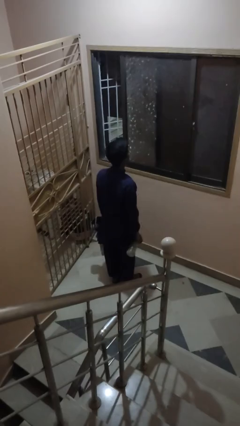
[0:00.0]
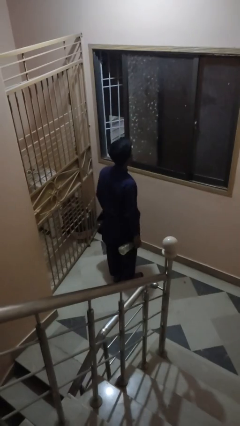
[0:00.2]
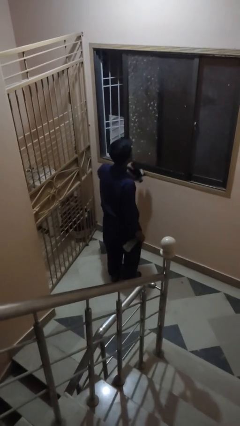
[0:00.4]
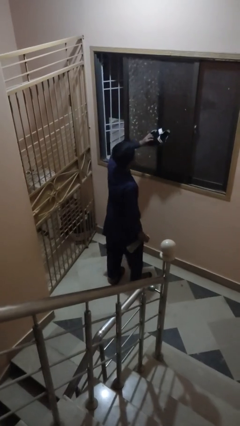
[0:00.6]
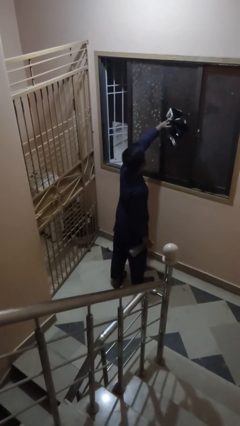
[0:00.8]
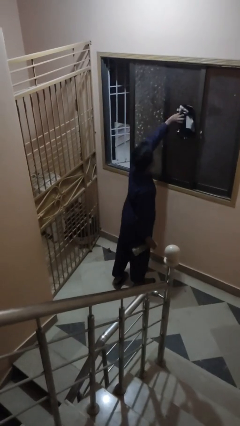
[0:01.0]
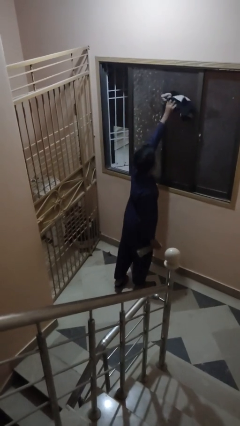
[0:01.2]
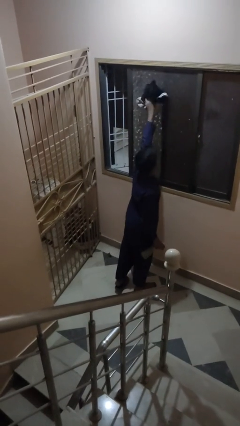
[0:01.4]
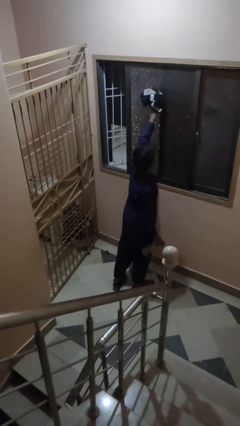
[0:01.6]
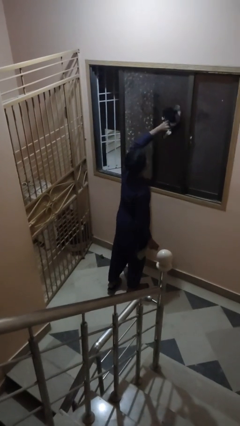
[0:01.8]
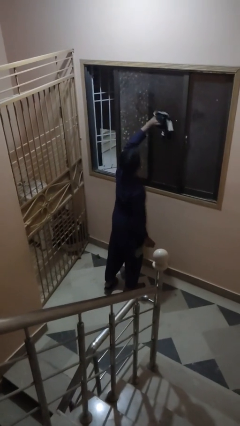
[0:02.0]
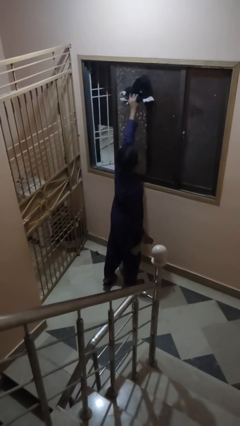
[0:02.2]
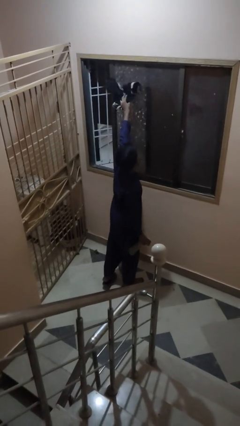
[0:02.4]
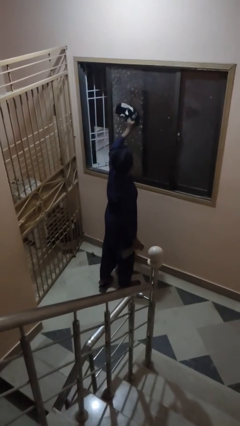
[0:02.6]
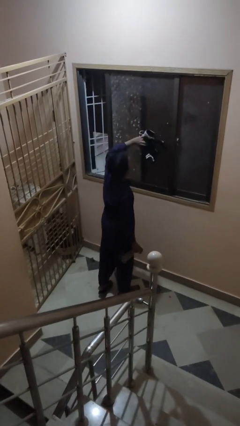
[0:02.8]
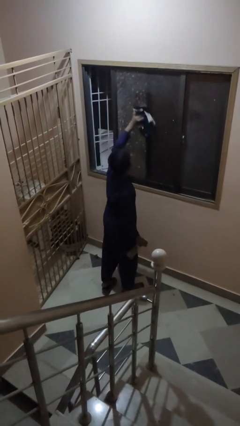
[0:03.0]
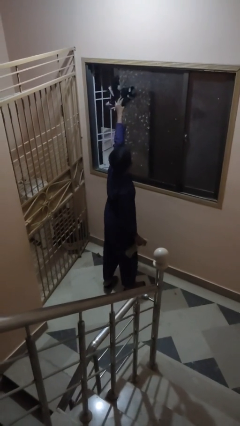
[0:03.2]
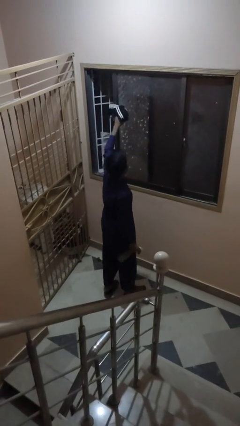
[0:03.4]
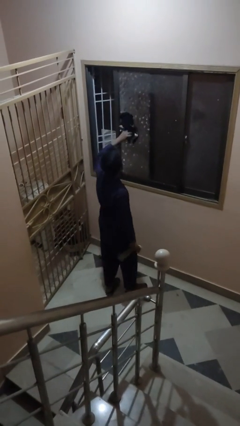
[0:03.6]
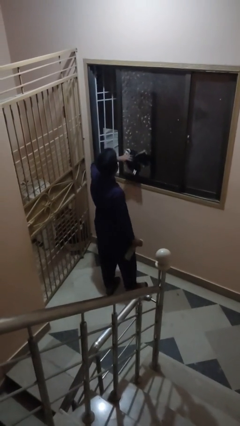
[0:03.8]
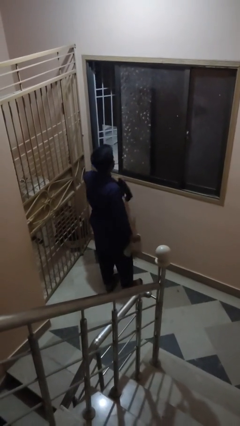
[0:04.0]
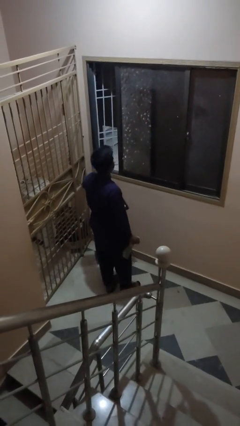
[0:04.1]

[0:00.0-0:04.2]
person washes window

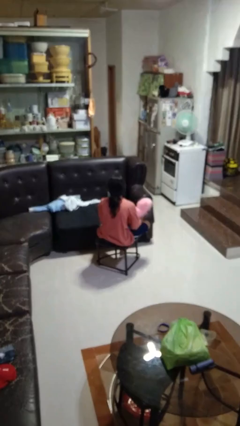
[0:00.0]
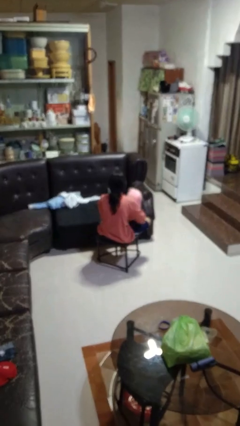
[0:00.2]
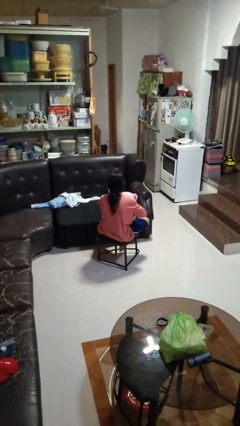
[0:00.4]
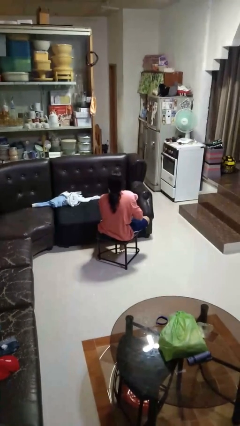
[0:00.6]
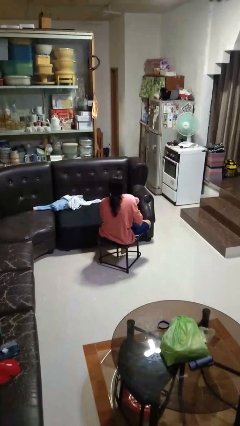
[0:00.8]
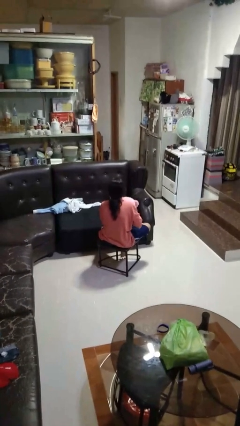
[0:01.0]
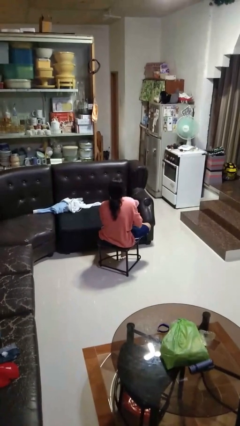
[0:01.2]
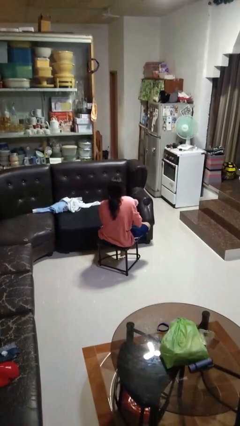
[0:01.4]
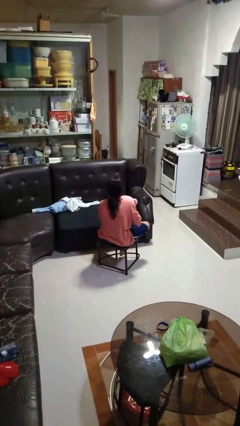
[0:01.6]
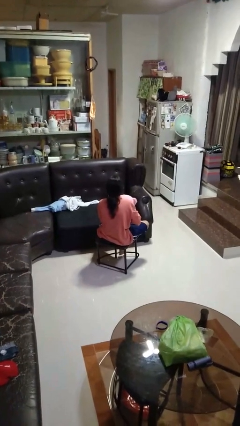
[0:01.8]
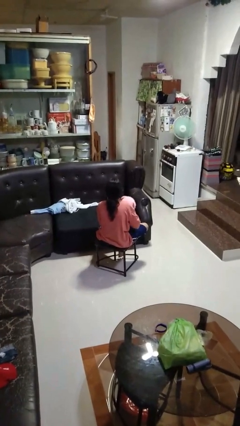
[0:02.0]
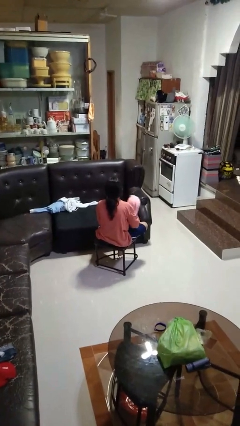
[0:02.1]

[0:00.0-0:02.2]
person hugs stuffed animal

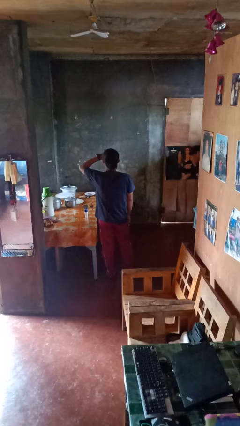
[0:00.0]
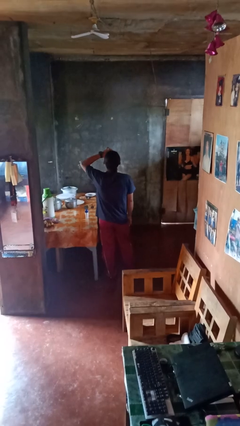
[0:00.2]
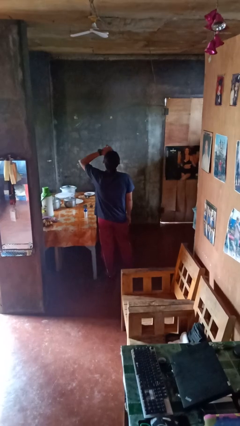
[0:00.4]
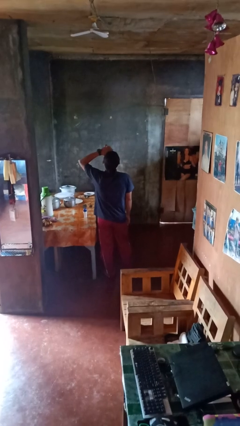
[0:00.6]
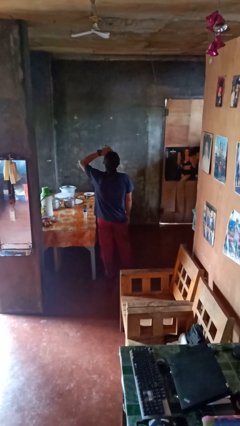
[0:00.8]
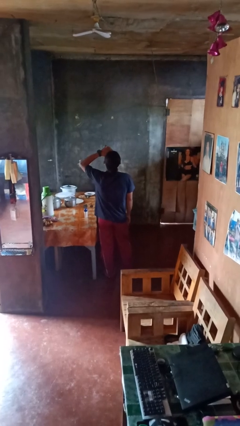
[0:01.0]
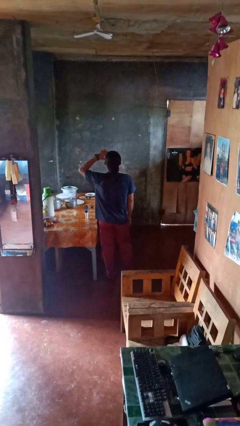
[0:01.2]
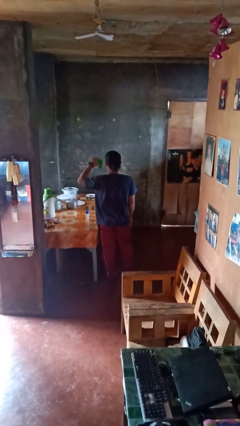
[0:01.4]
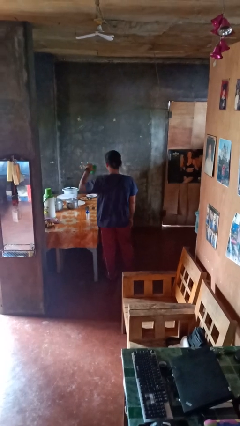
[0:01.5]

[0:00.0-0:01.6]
person drinks from cup

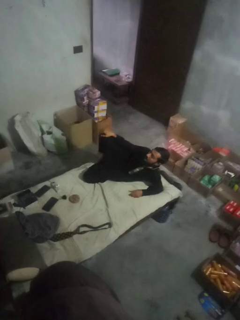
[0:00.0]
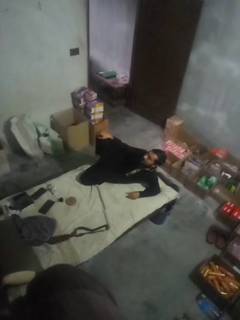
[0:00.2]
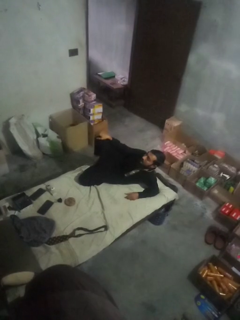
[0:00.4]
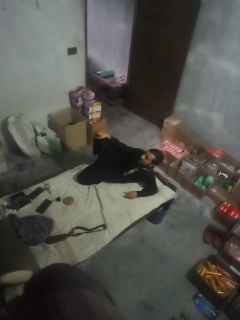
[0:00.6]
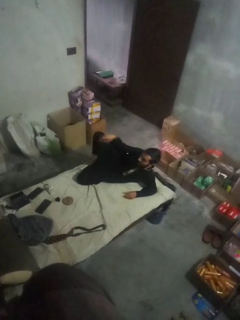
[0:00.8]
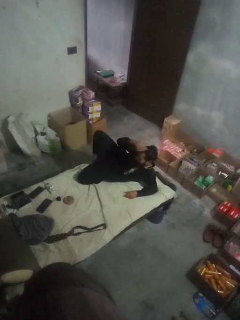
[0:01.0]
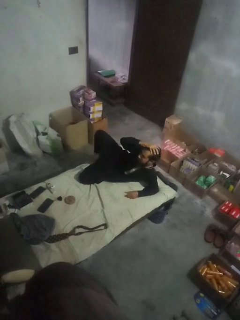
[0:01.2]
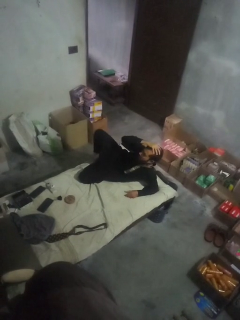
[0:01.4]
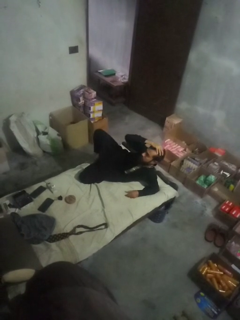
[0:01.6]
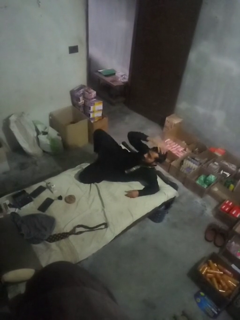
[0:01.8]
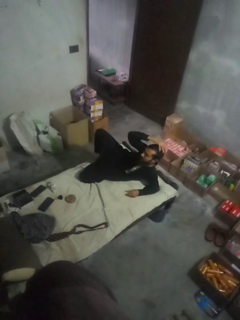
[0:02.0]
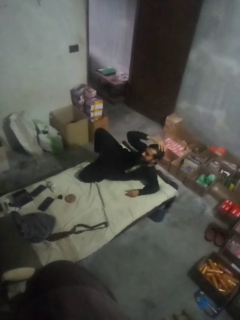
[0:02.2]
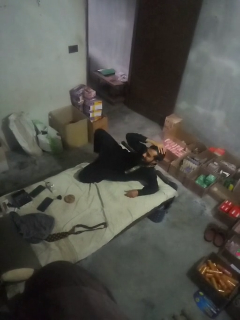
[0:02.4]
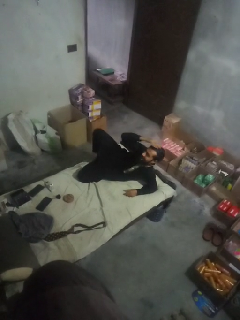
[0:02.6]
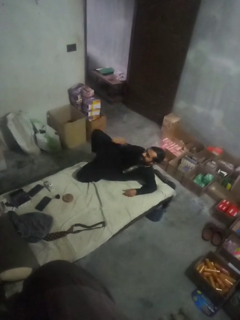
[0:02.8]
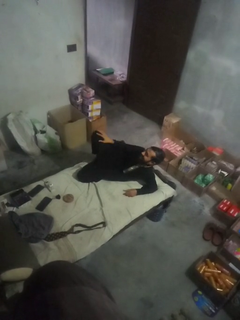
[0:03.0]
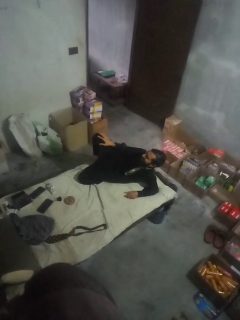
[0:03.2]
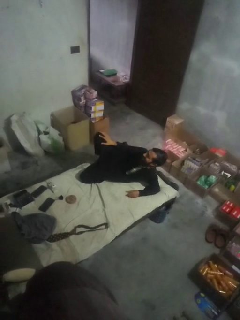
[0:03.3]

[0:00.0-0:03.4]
person pats head

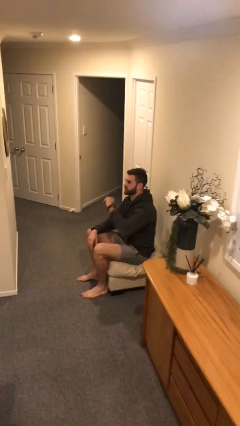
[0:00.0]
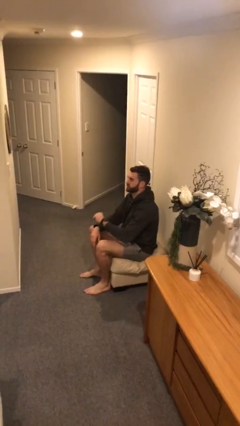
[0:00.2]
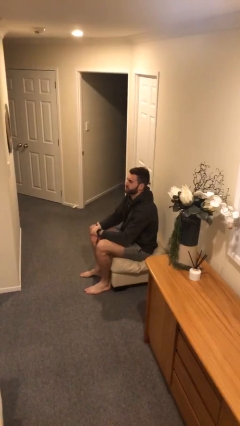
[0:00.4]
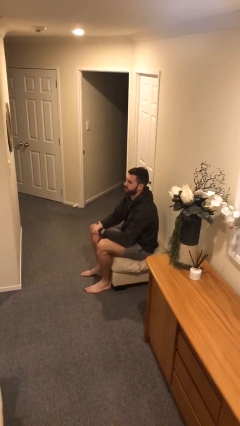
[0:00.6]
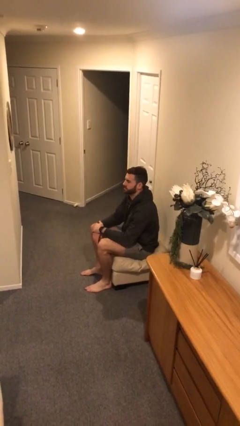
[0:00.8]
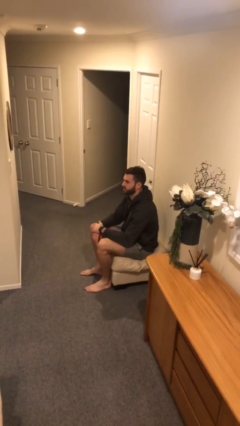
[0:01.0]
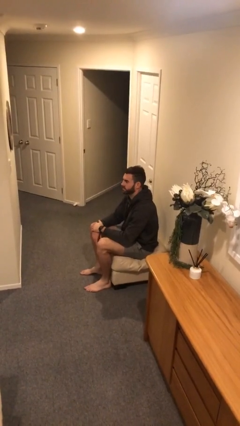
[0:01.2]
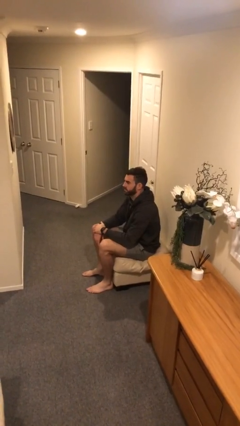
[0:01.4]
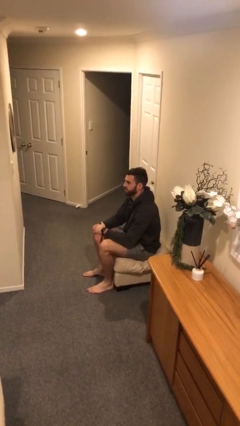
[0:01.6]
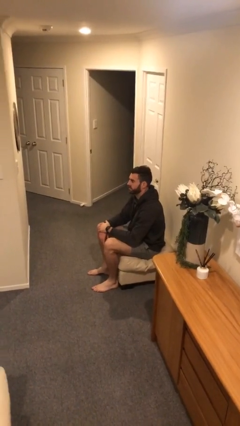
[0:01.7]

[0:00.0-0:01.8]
person gestures lower hand

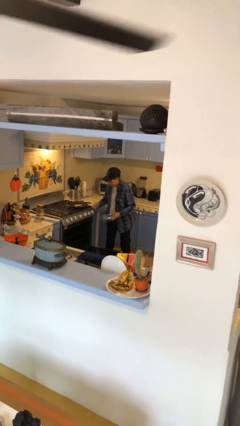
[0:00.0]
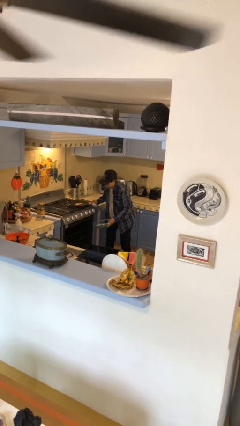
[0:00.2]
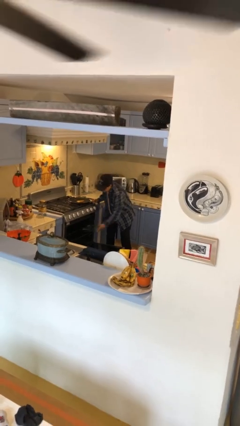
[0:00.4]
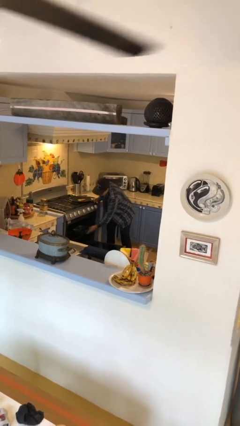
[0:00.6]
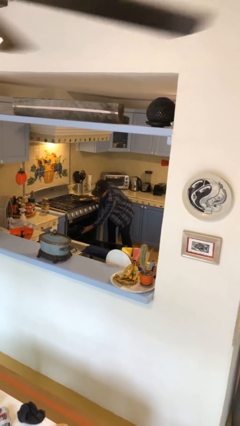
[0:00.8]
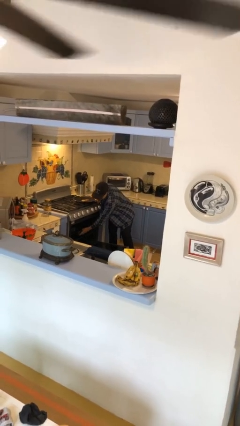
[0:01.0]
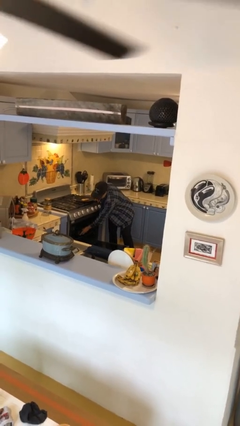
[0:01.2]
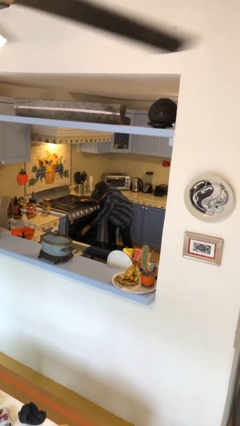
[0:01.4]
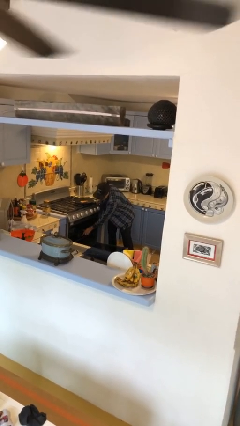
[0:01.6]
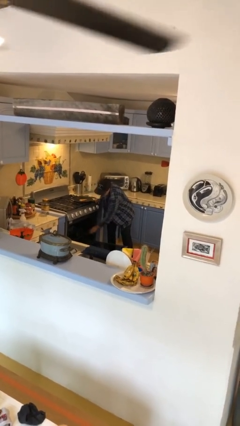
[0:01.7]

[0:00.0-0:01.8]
person puts object into oven

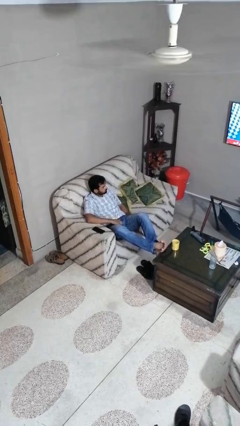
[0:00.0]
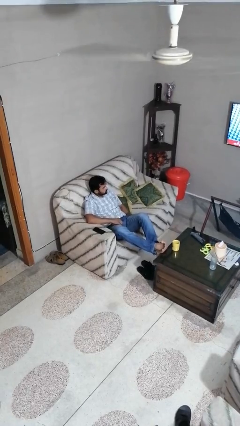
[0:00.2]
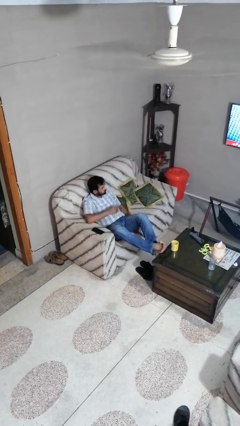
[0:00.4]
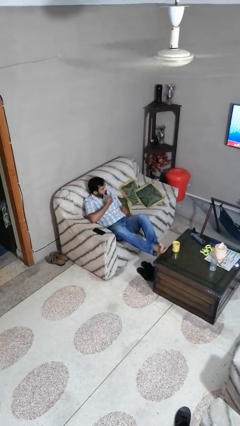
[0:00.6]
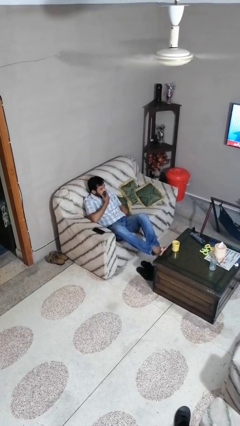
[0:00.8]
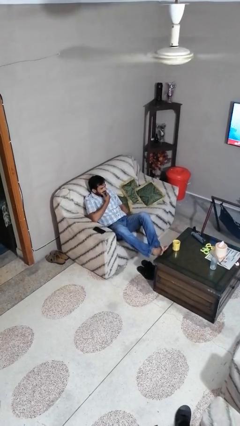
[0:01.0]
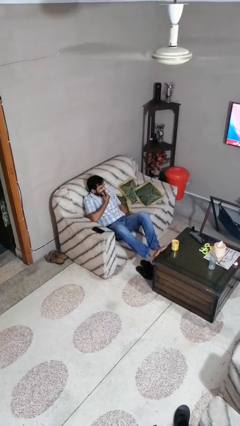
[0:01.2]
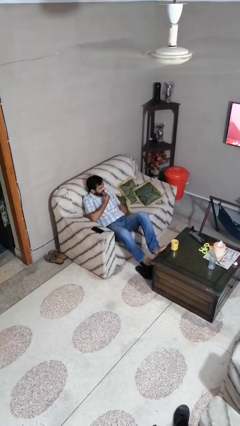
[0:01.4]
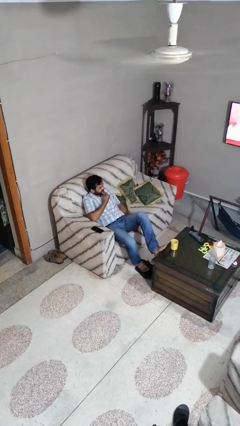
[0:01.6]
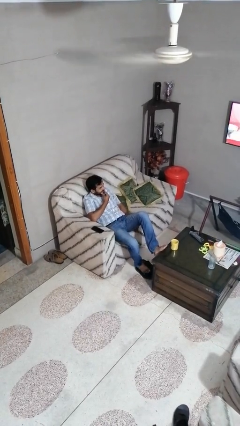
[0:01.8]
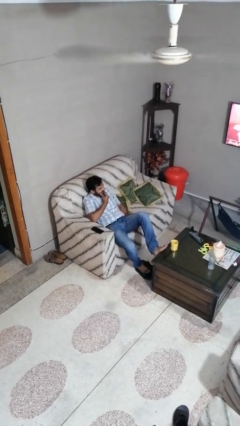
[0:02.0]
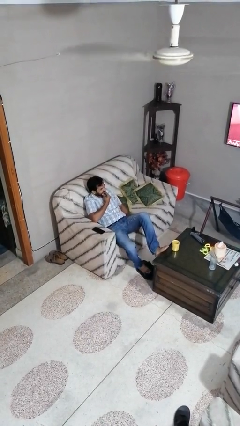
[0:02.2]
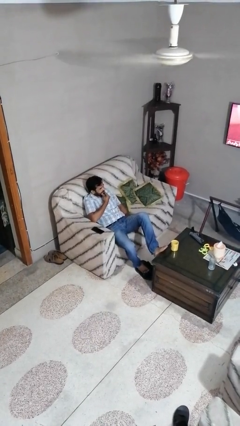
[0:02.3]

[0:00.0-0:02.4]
person strokes chin

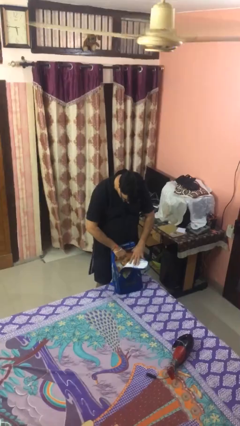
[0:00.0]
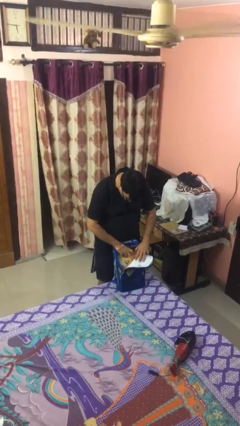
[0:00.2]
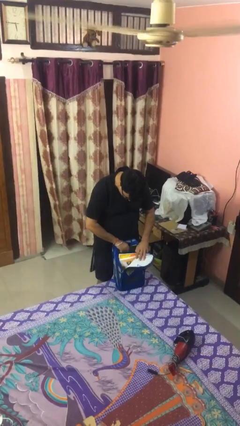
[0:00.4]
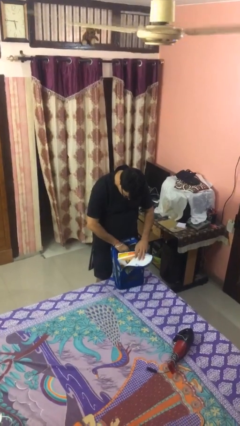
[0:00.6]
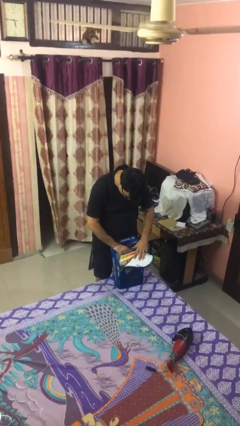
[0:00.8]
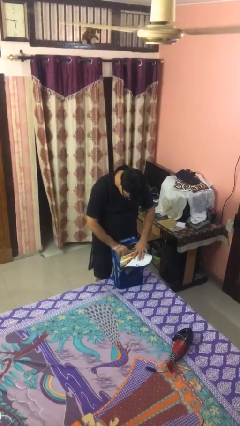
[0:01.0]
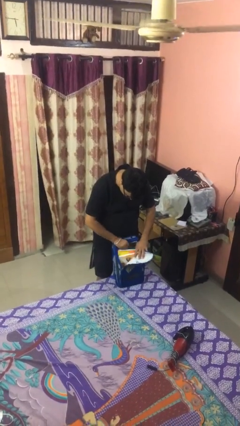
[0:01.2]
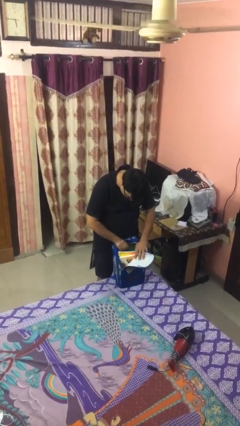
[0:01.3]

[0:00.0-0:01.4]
person searches in backpack
